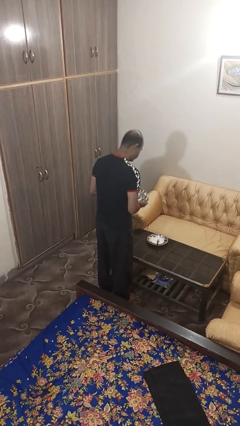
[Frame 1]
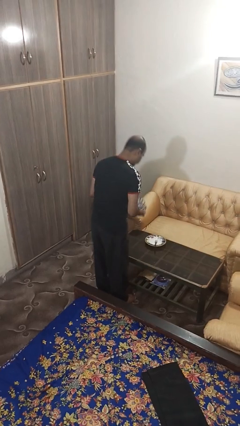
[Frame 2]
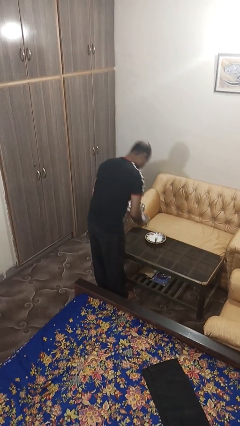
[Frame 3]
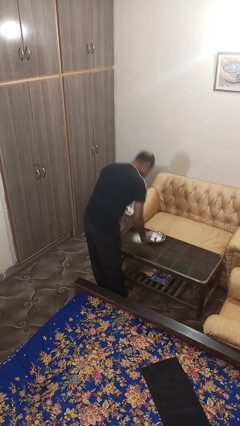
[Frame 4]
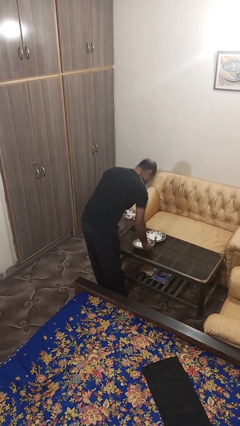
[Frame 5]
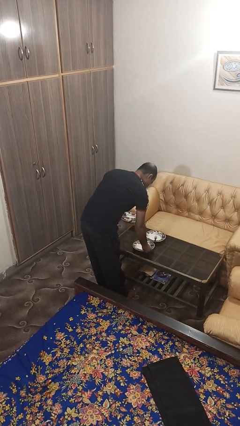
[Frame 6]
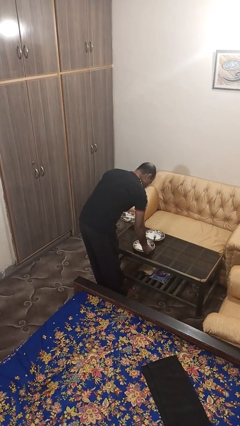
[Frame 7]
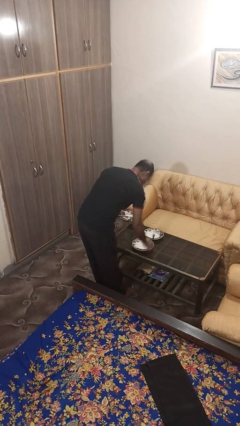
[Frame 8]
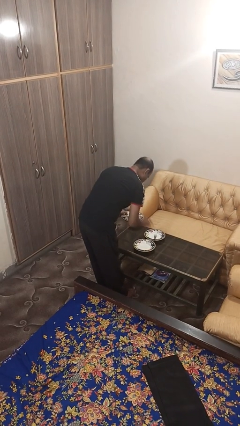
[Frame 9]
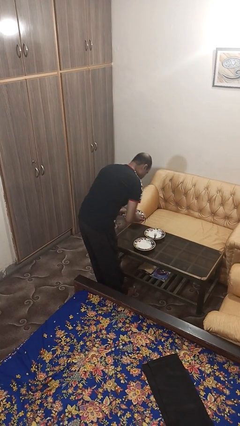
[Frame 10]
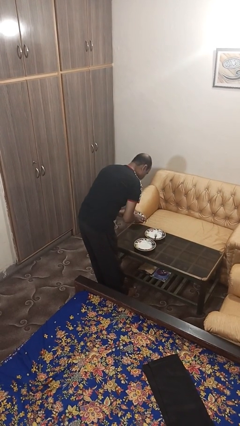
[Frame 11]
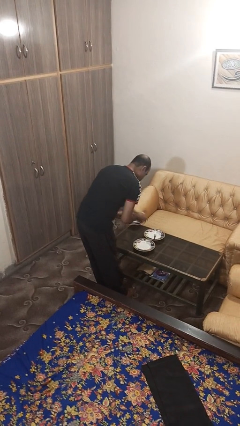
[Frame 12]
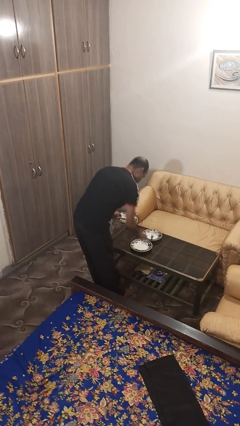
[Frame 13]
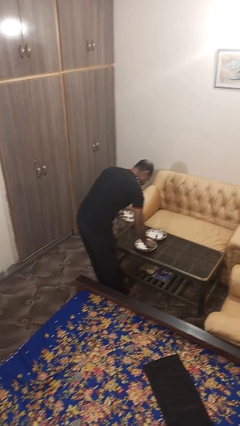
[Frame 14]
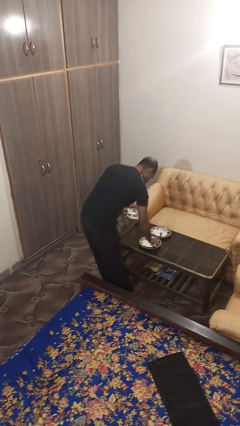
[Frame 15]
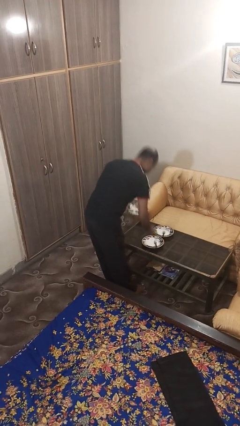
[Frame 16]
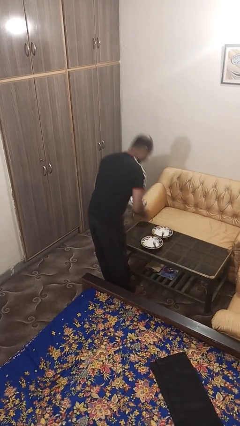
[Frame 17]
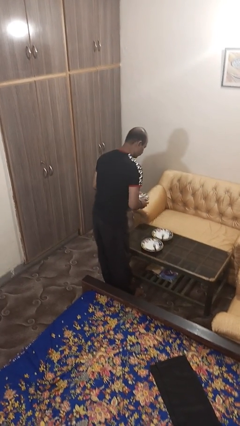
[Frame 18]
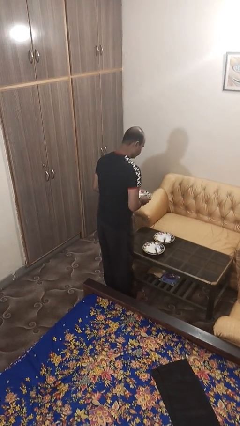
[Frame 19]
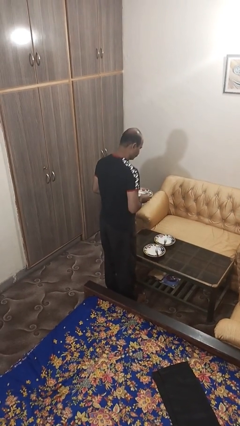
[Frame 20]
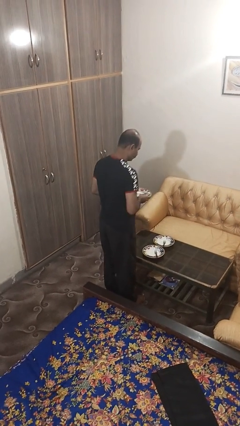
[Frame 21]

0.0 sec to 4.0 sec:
person sets table

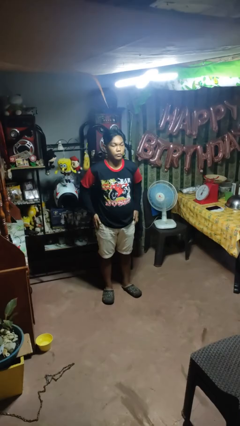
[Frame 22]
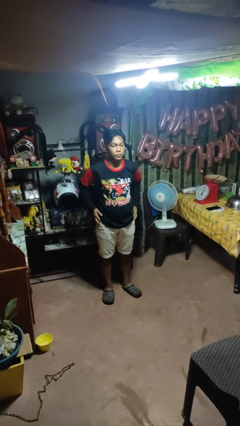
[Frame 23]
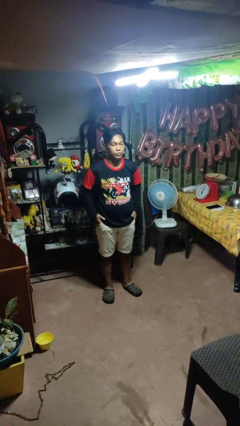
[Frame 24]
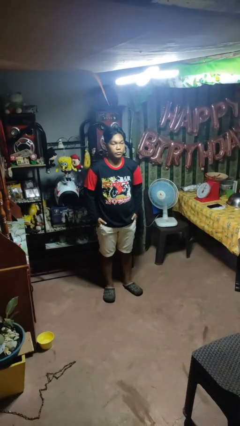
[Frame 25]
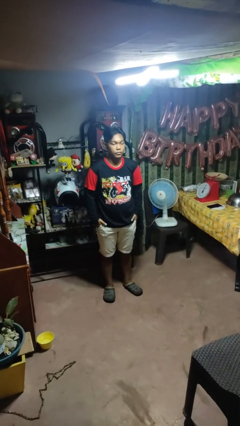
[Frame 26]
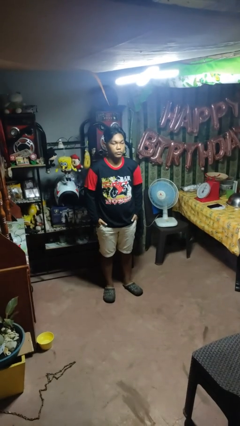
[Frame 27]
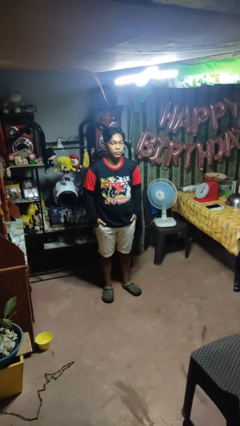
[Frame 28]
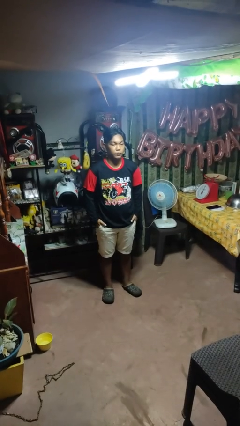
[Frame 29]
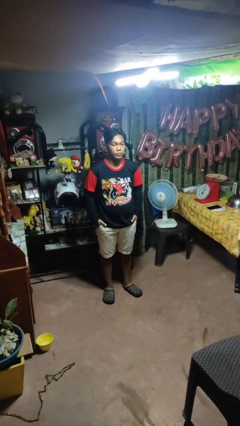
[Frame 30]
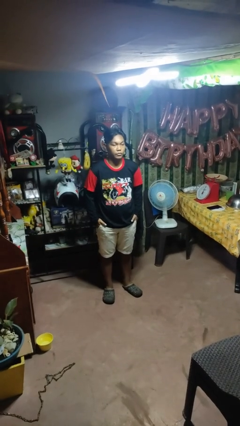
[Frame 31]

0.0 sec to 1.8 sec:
person puts hands in back pockets

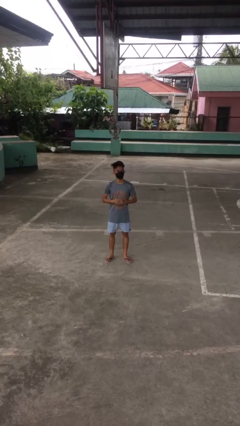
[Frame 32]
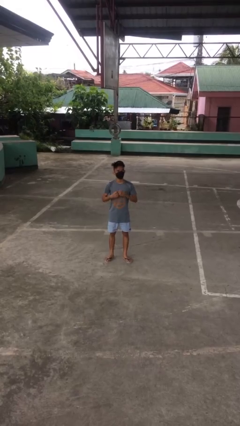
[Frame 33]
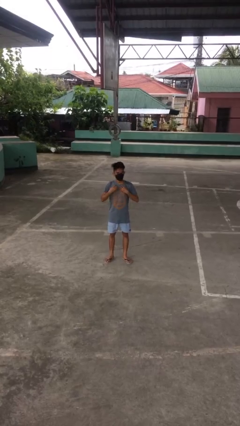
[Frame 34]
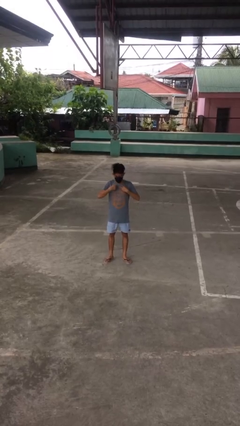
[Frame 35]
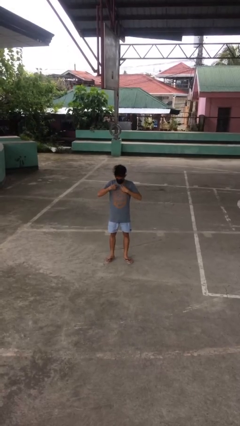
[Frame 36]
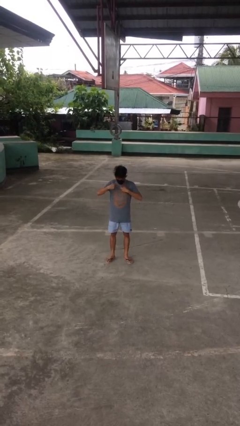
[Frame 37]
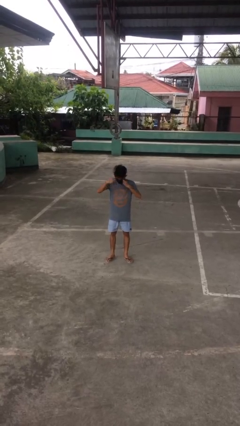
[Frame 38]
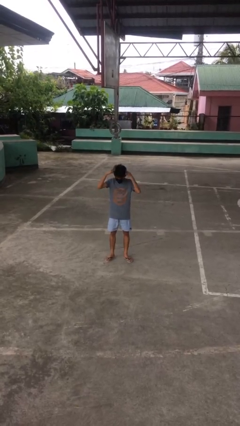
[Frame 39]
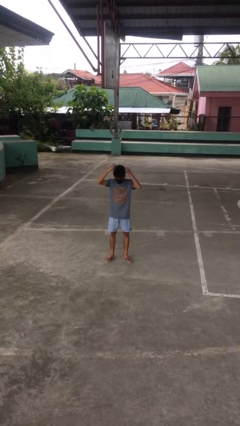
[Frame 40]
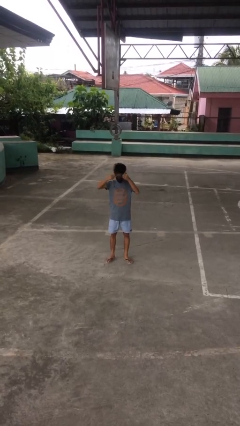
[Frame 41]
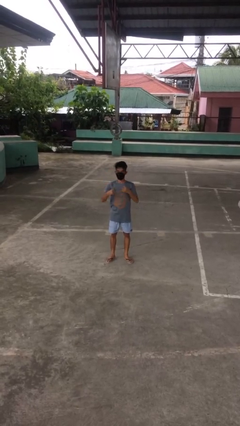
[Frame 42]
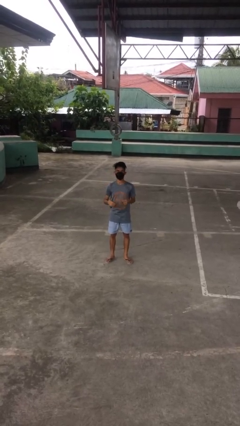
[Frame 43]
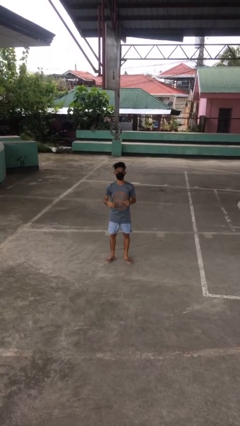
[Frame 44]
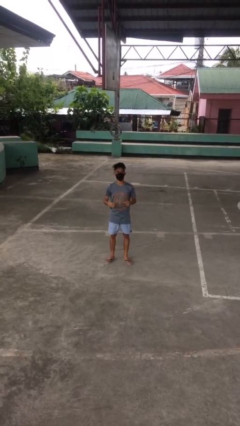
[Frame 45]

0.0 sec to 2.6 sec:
person takes off necklace

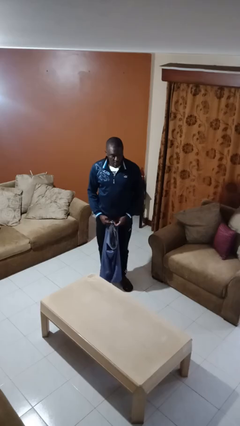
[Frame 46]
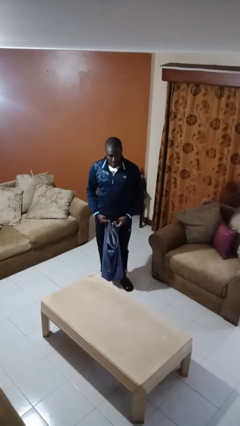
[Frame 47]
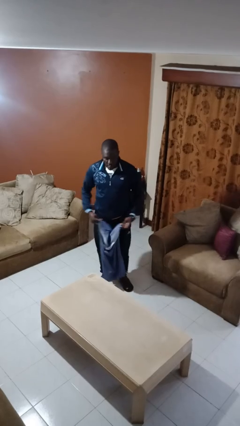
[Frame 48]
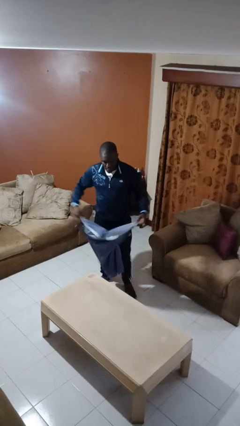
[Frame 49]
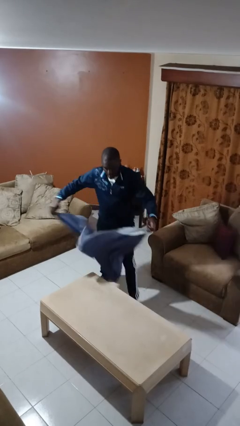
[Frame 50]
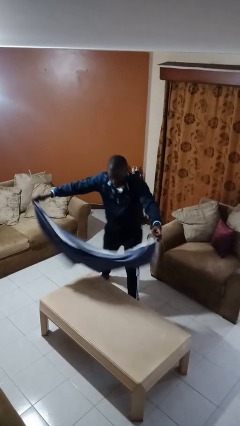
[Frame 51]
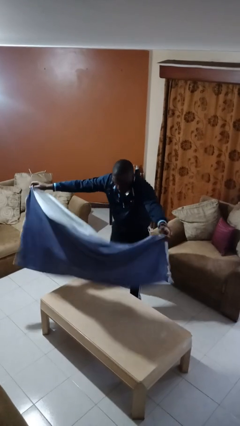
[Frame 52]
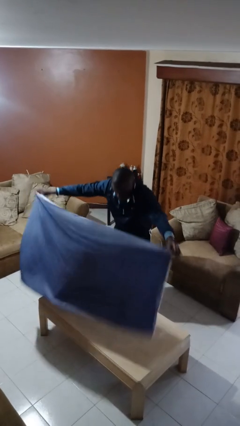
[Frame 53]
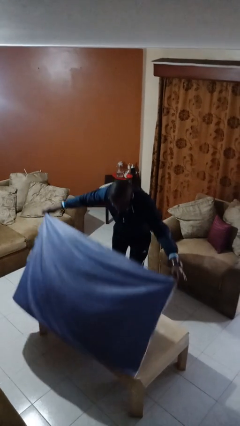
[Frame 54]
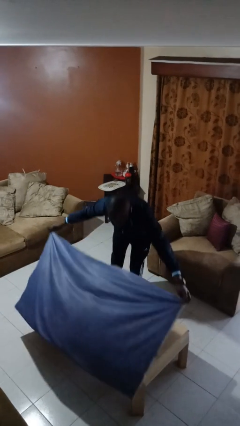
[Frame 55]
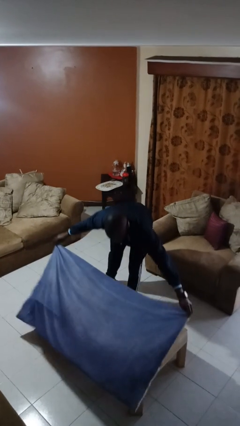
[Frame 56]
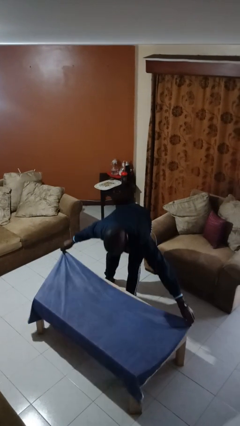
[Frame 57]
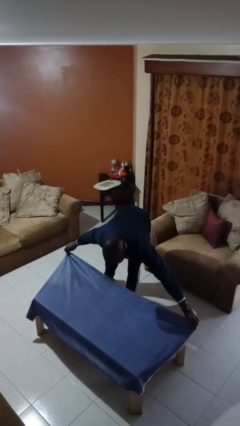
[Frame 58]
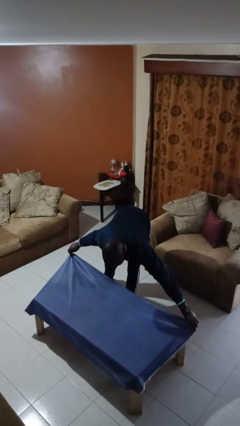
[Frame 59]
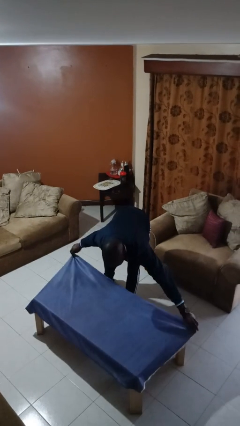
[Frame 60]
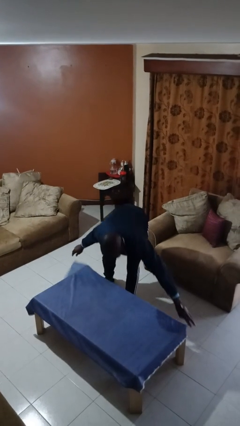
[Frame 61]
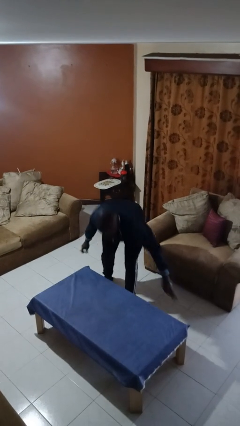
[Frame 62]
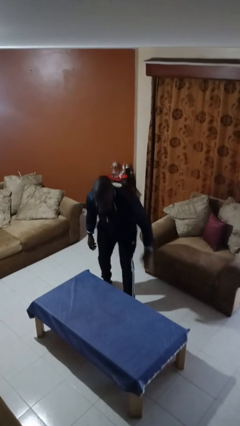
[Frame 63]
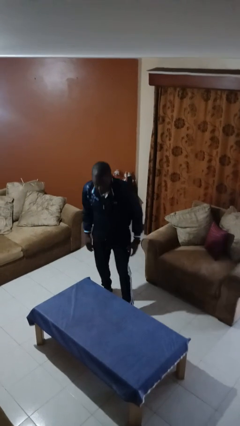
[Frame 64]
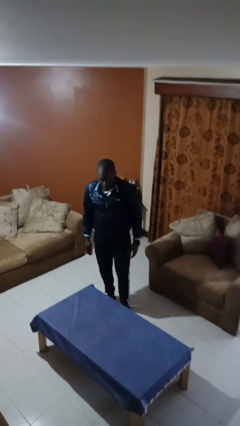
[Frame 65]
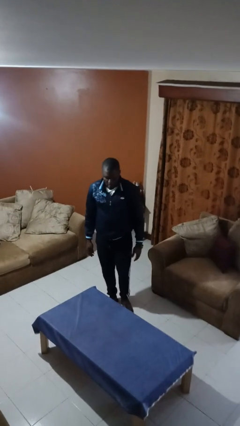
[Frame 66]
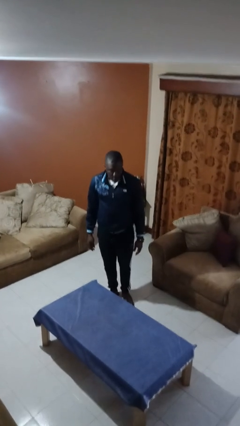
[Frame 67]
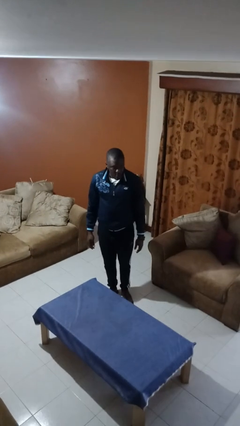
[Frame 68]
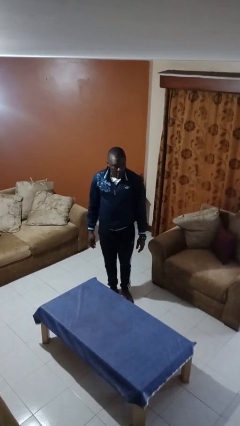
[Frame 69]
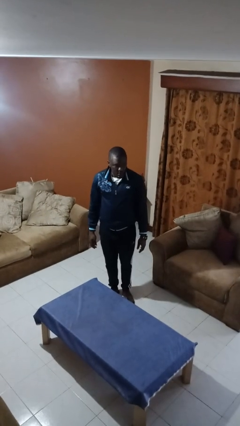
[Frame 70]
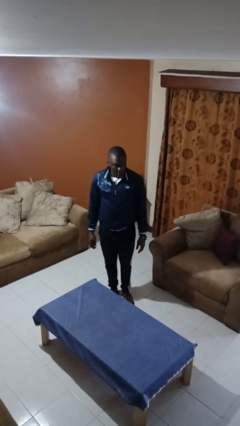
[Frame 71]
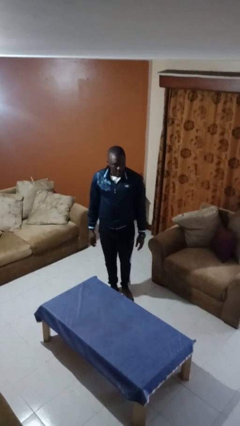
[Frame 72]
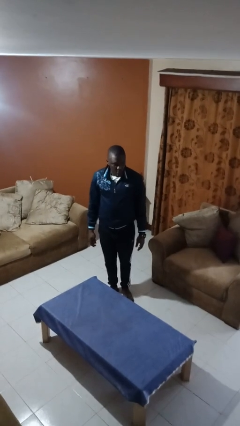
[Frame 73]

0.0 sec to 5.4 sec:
person spreads tablecloth

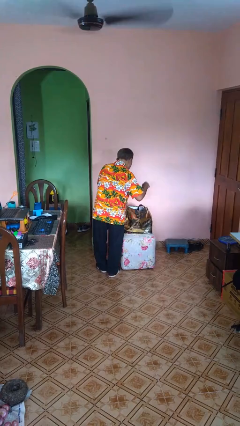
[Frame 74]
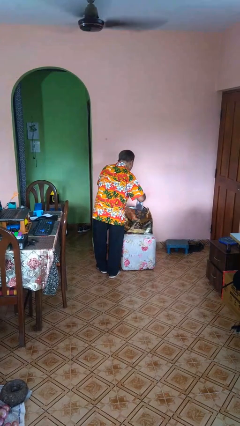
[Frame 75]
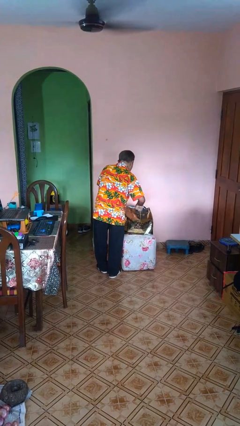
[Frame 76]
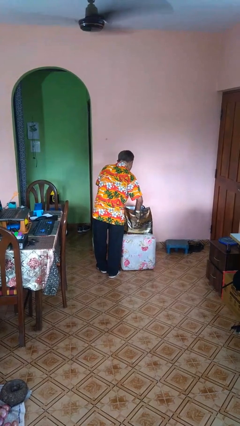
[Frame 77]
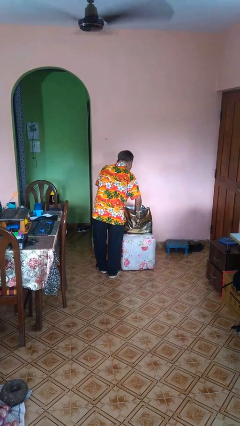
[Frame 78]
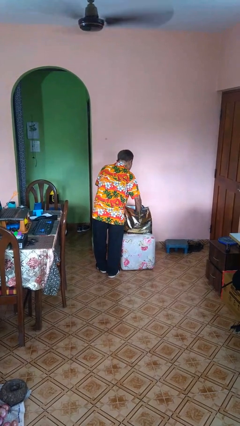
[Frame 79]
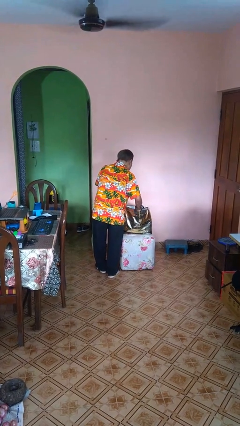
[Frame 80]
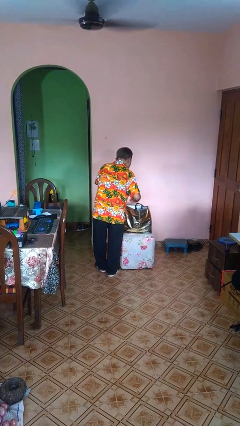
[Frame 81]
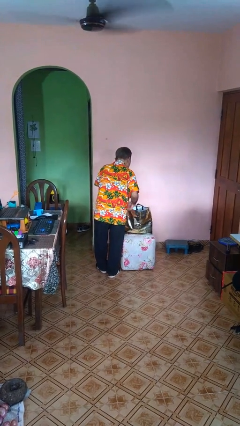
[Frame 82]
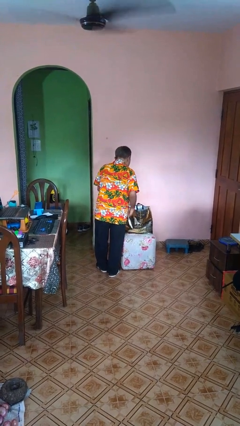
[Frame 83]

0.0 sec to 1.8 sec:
person puts object into bag

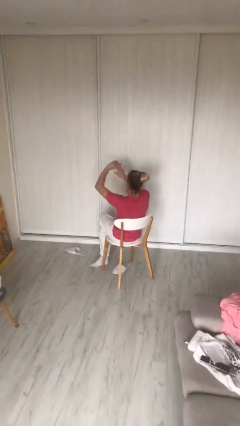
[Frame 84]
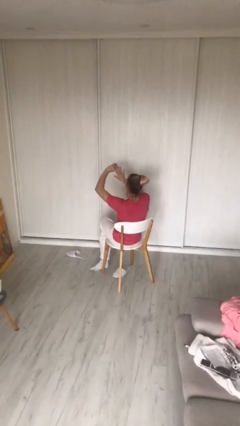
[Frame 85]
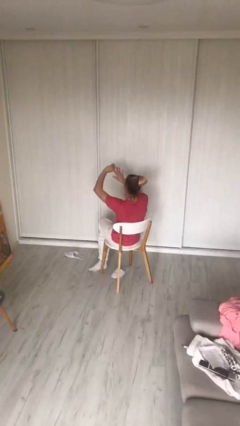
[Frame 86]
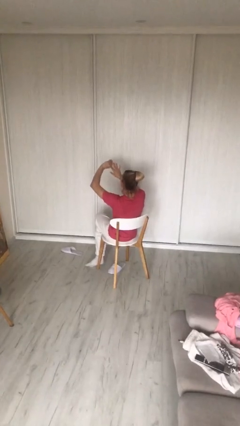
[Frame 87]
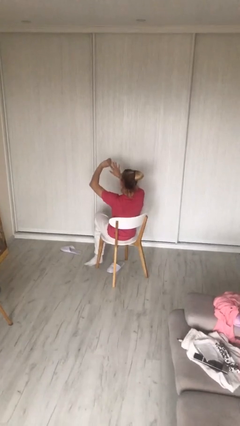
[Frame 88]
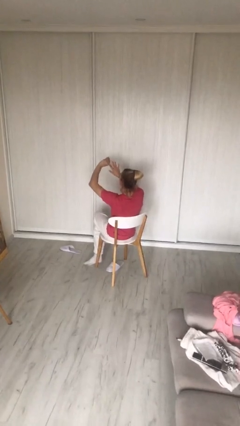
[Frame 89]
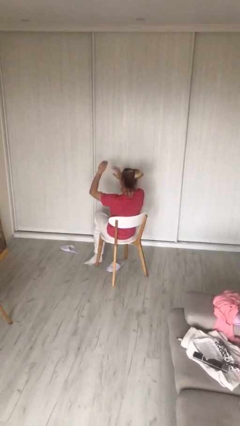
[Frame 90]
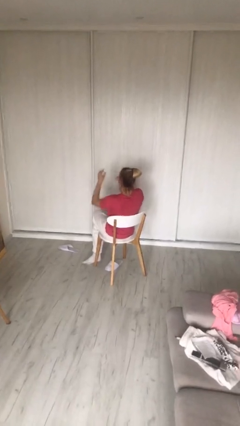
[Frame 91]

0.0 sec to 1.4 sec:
person paints fingernails

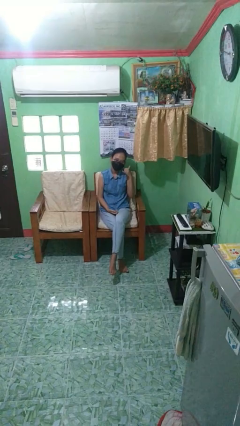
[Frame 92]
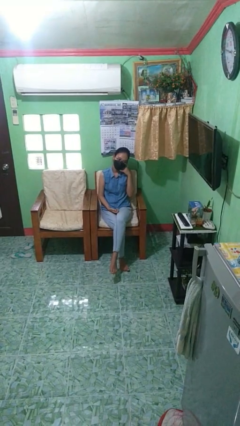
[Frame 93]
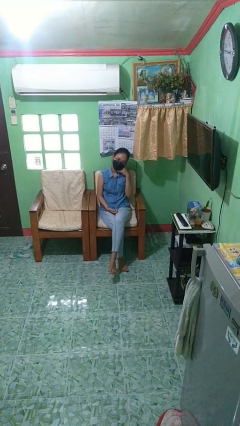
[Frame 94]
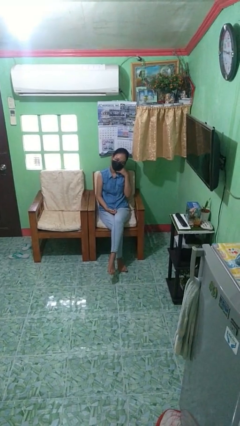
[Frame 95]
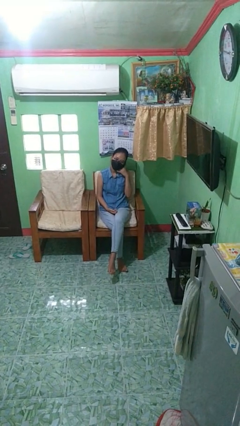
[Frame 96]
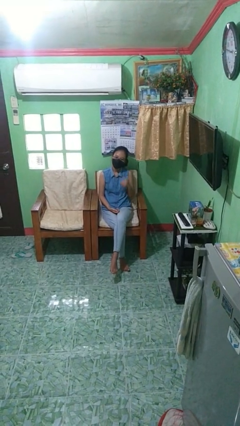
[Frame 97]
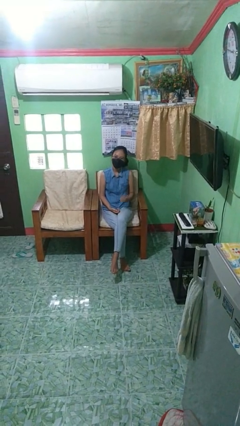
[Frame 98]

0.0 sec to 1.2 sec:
person gestures call me